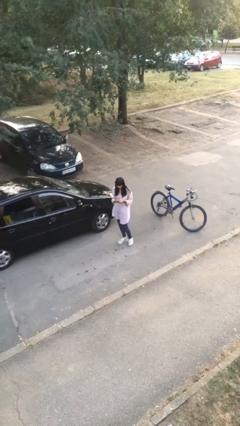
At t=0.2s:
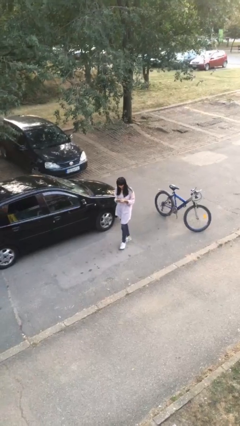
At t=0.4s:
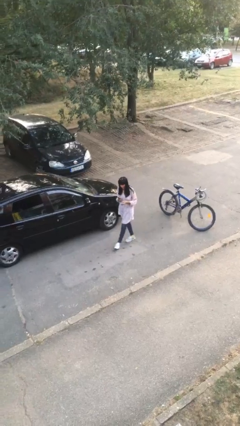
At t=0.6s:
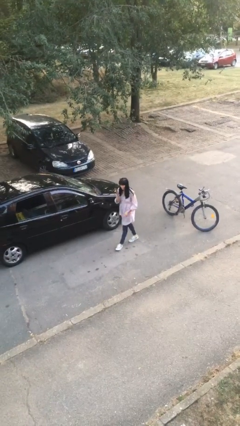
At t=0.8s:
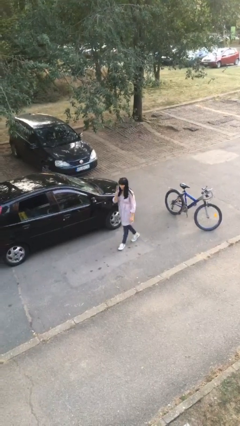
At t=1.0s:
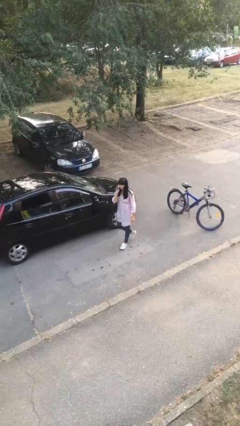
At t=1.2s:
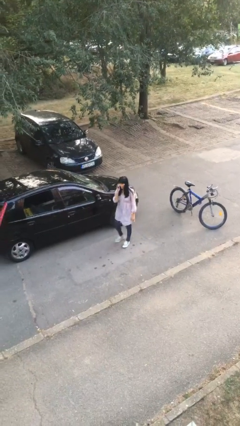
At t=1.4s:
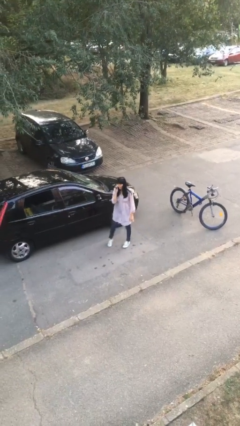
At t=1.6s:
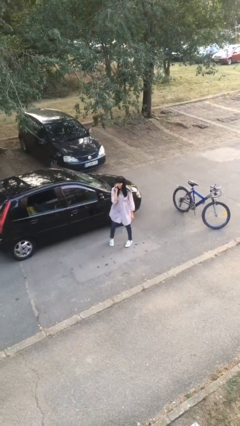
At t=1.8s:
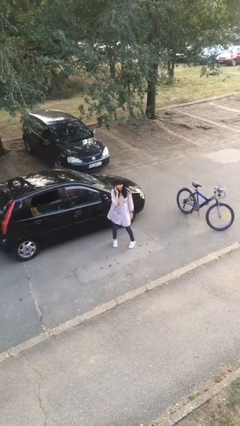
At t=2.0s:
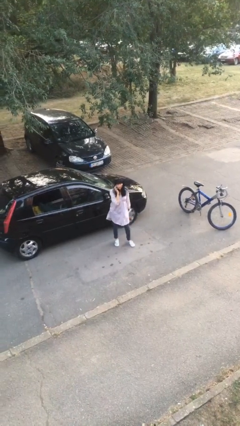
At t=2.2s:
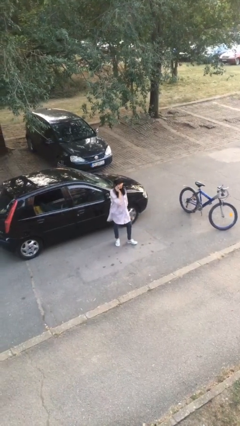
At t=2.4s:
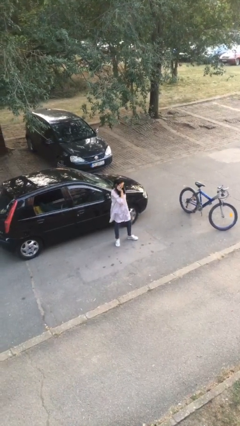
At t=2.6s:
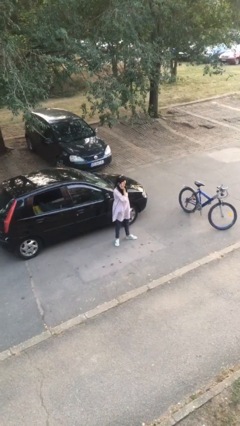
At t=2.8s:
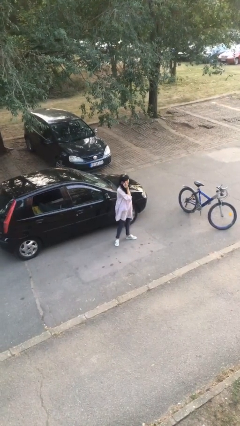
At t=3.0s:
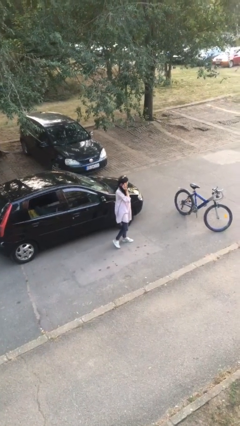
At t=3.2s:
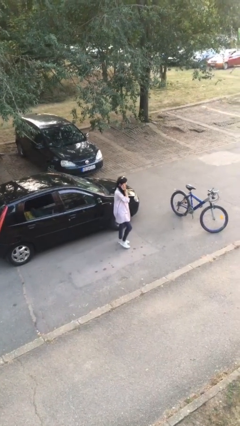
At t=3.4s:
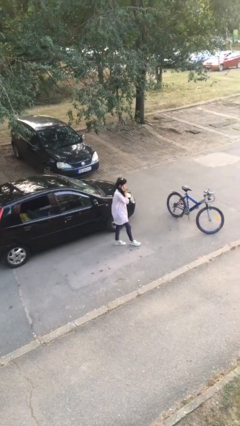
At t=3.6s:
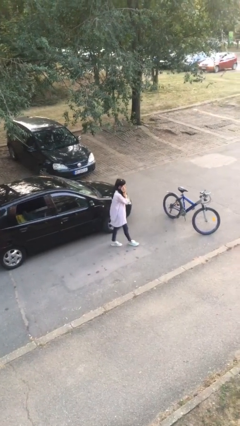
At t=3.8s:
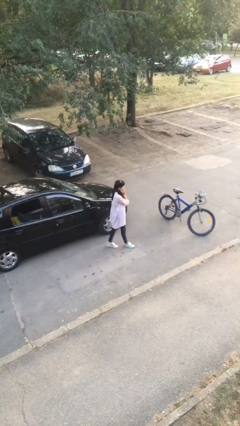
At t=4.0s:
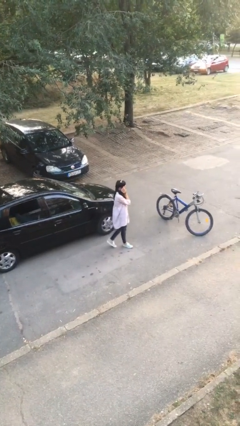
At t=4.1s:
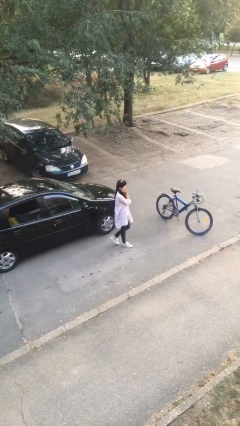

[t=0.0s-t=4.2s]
person talks on phone

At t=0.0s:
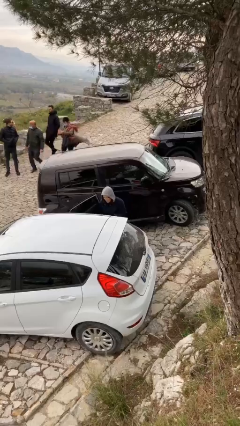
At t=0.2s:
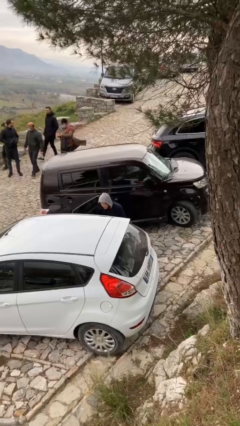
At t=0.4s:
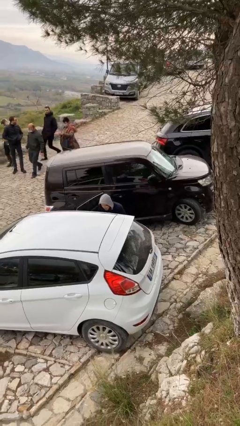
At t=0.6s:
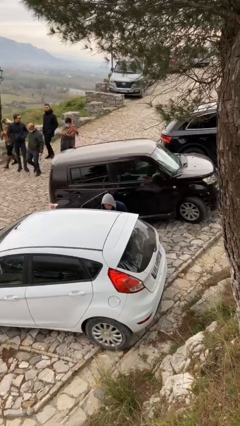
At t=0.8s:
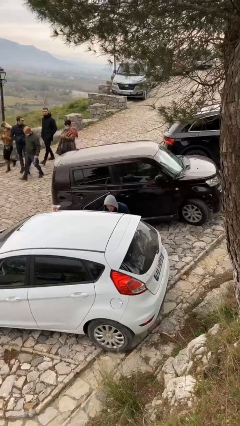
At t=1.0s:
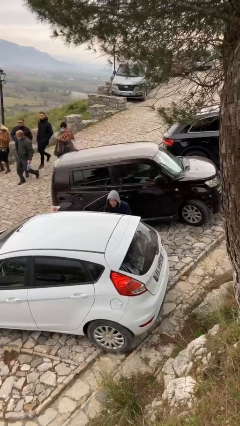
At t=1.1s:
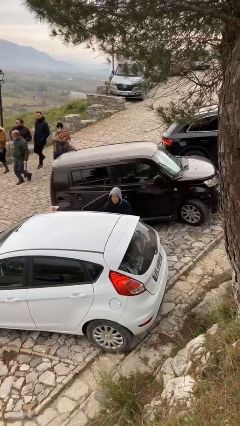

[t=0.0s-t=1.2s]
person loads car

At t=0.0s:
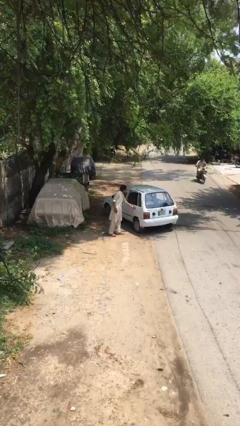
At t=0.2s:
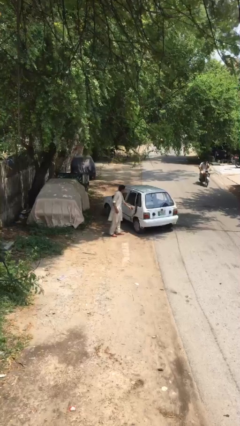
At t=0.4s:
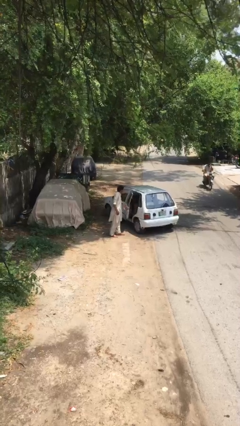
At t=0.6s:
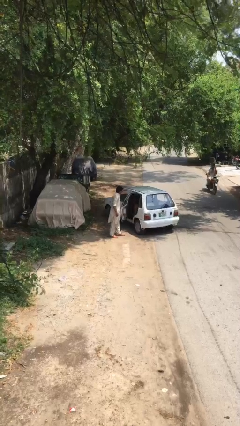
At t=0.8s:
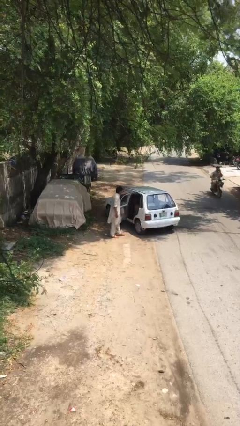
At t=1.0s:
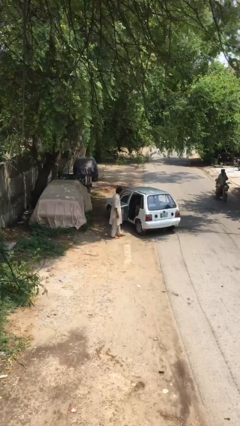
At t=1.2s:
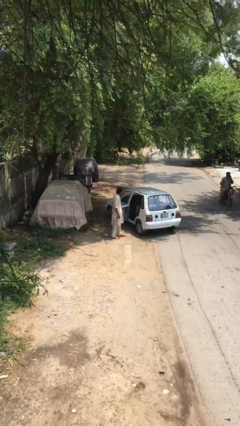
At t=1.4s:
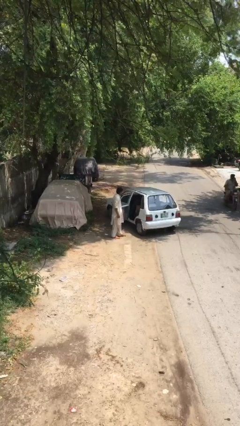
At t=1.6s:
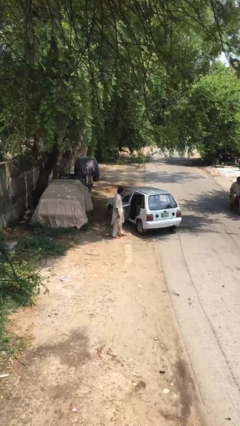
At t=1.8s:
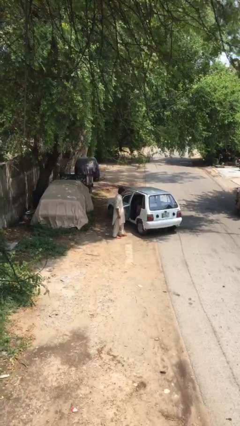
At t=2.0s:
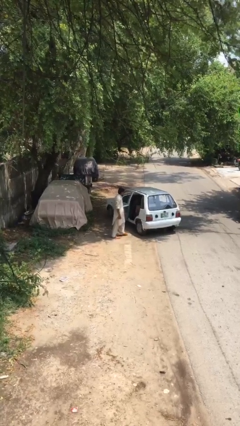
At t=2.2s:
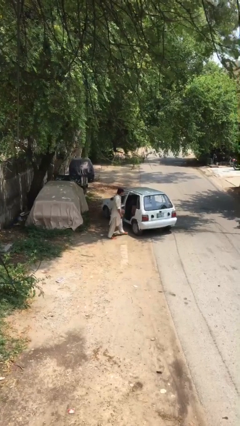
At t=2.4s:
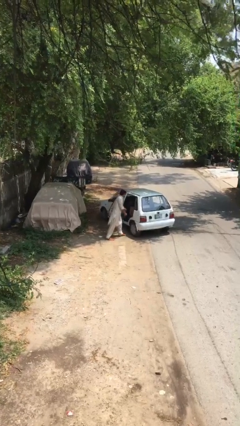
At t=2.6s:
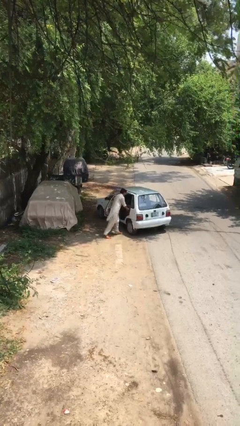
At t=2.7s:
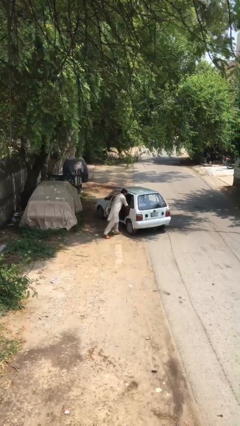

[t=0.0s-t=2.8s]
person opens car door

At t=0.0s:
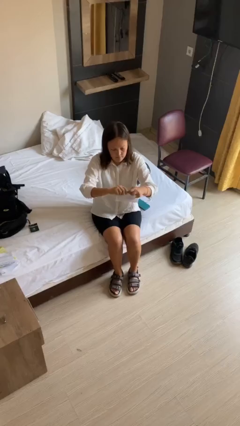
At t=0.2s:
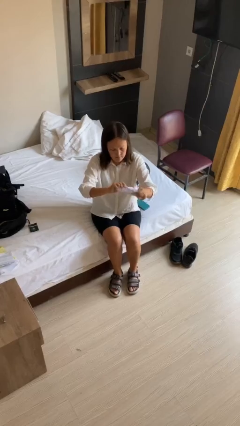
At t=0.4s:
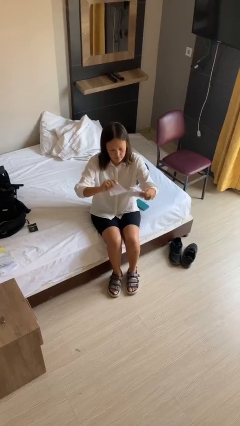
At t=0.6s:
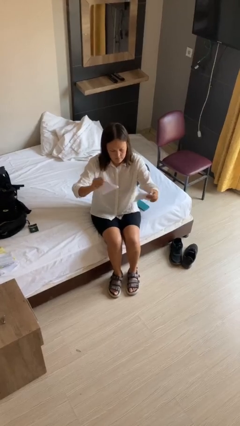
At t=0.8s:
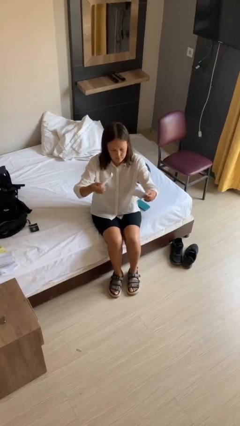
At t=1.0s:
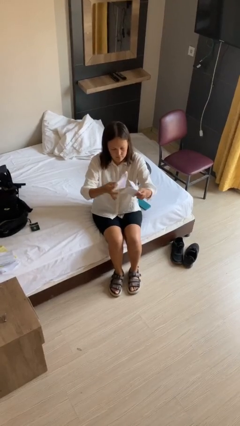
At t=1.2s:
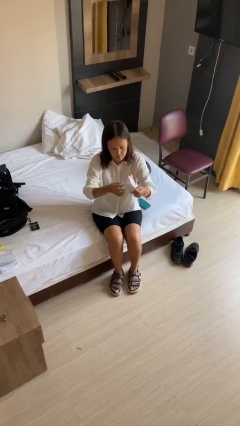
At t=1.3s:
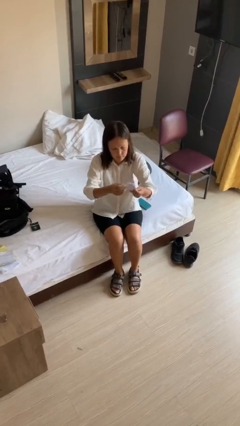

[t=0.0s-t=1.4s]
person tears paper

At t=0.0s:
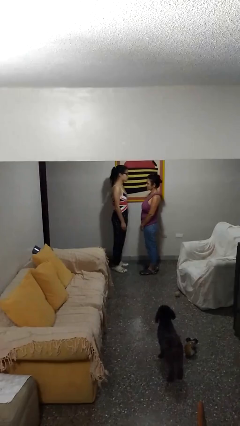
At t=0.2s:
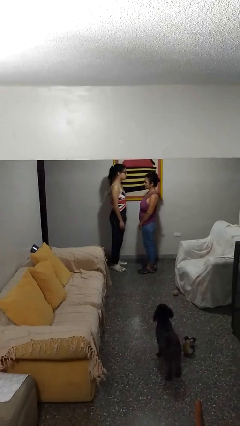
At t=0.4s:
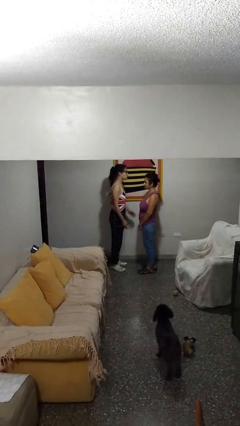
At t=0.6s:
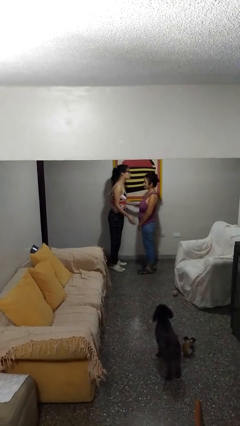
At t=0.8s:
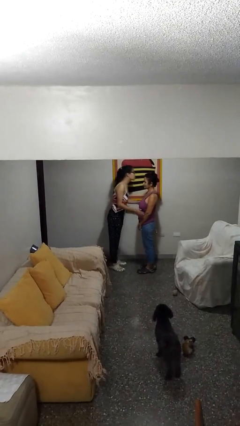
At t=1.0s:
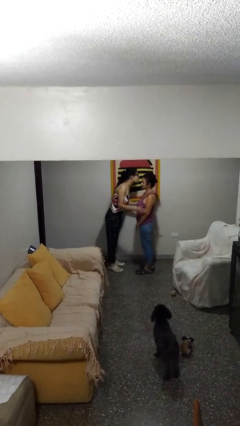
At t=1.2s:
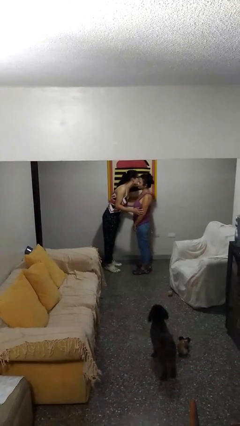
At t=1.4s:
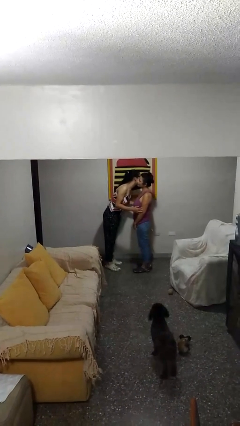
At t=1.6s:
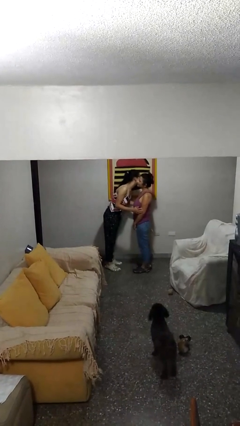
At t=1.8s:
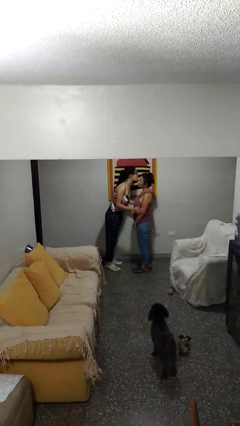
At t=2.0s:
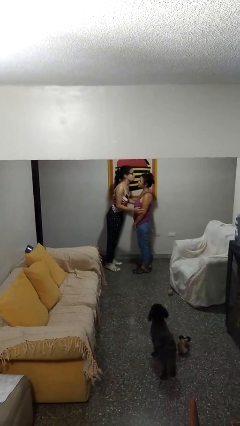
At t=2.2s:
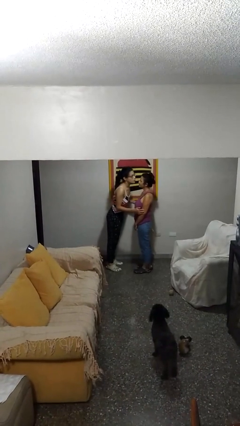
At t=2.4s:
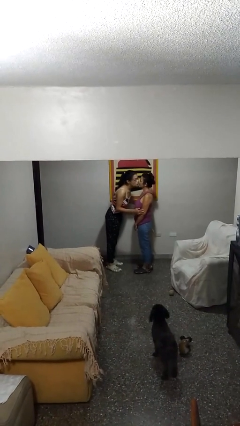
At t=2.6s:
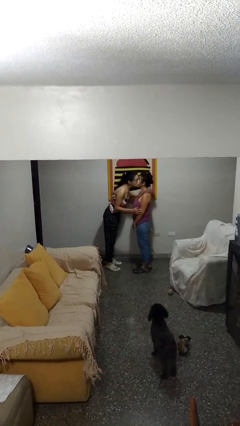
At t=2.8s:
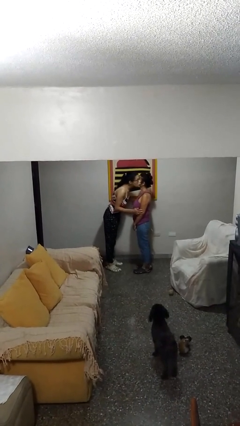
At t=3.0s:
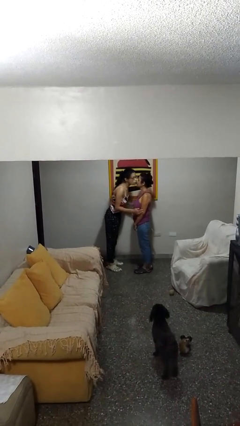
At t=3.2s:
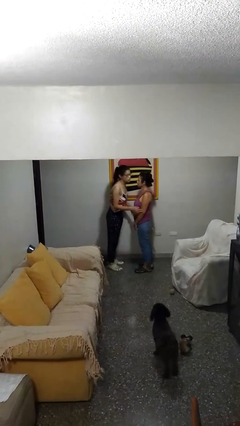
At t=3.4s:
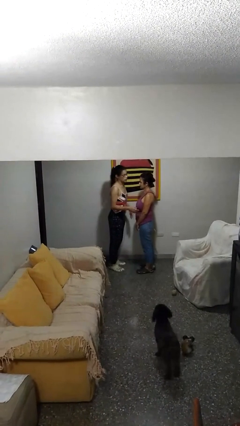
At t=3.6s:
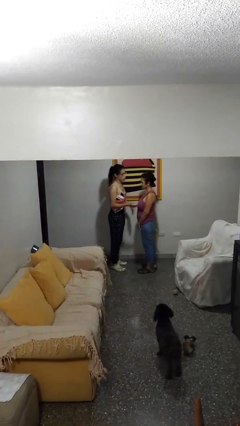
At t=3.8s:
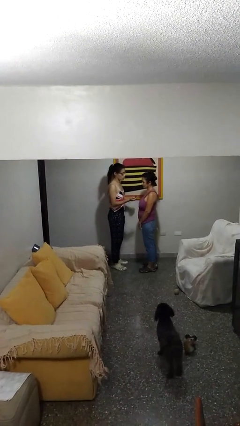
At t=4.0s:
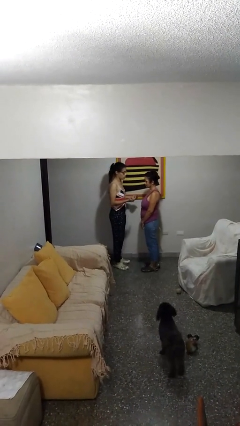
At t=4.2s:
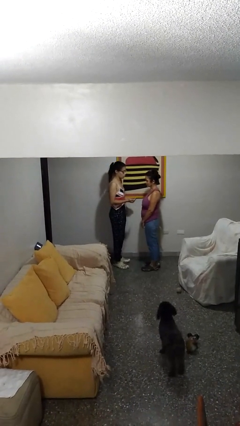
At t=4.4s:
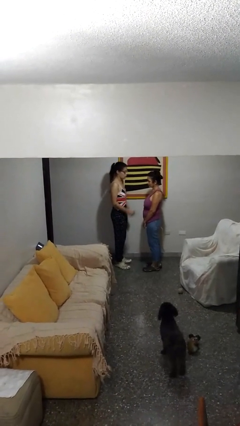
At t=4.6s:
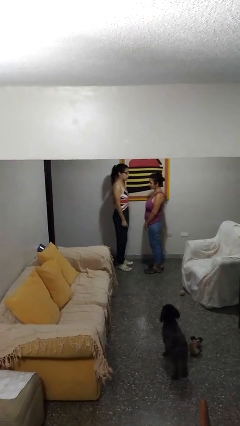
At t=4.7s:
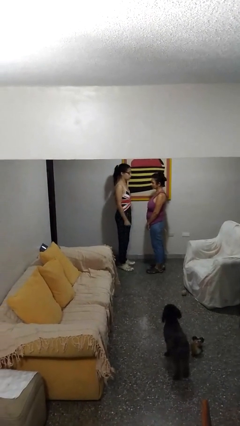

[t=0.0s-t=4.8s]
person kisses cheek of person

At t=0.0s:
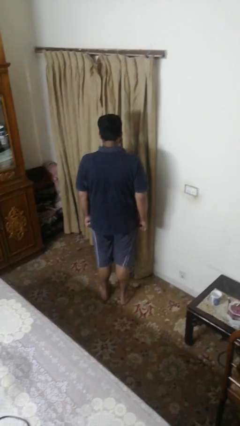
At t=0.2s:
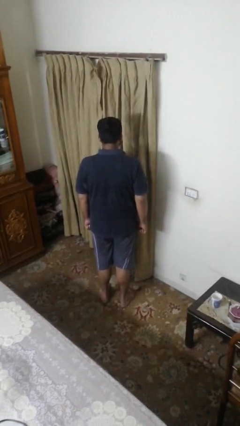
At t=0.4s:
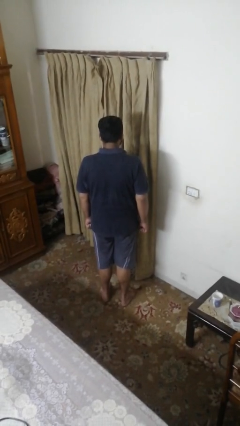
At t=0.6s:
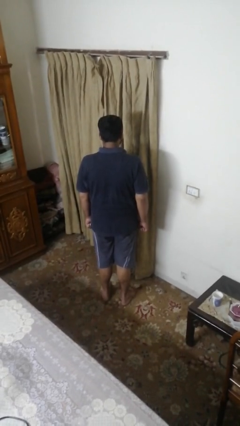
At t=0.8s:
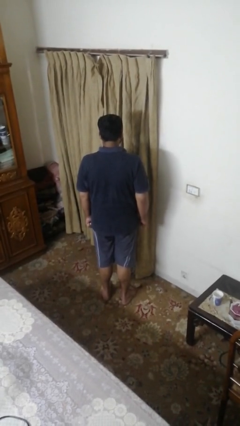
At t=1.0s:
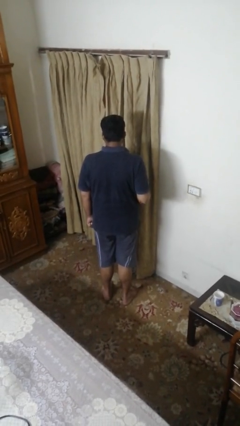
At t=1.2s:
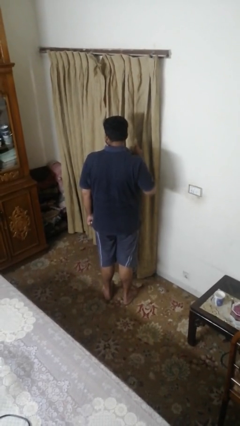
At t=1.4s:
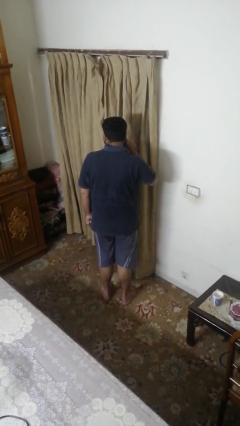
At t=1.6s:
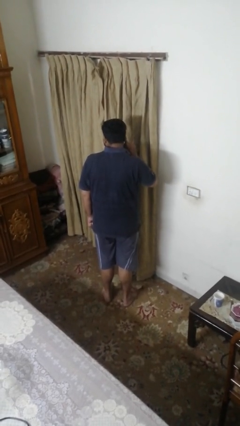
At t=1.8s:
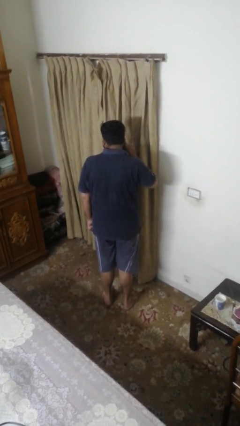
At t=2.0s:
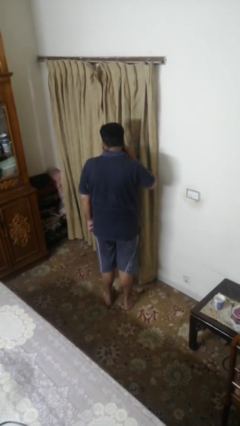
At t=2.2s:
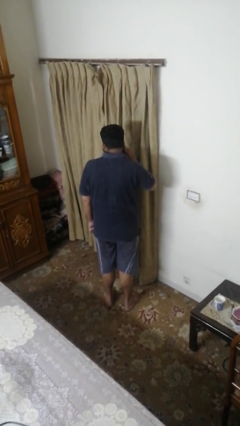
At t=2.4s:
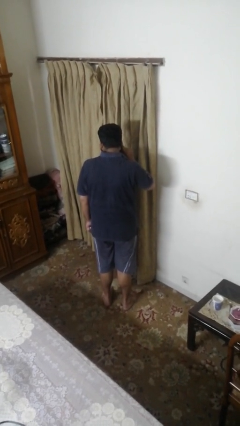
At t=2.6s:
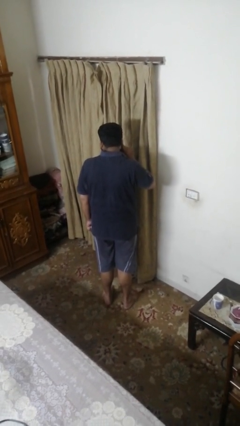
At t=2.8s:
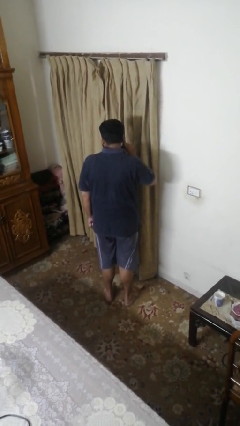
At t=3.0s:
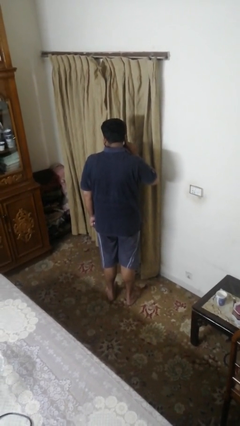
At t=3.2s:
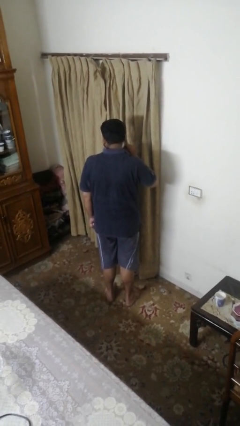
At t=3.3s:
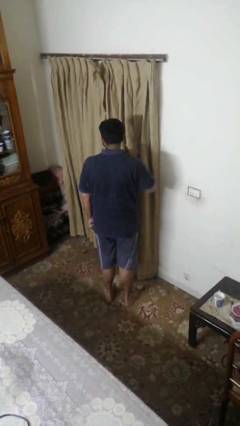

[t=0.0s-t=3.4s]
person gestures listen closely
